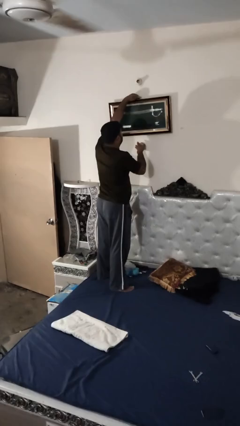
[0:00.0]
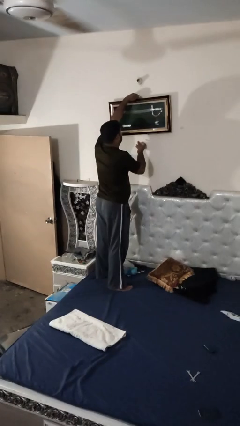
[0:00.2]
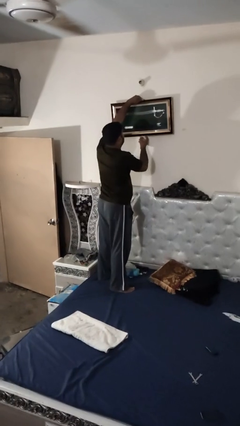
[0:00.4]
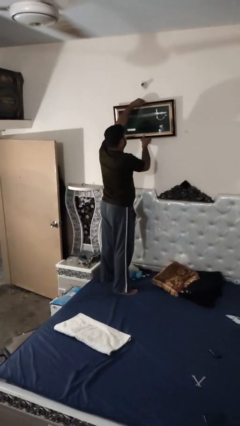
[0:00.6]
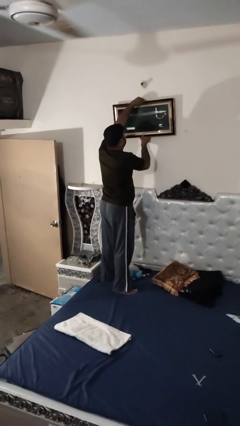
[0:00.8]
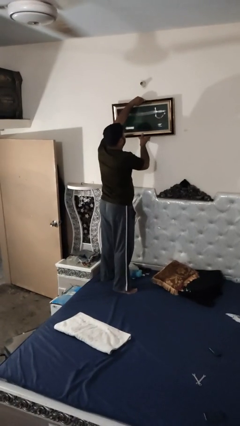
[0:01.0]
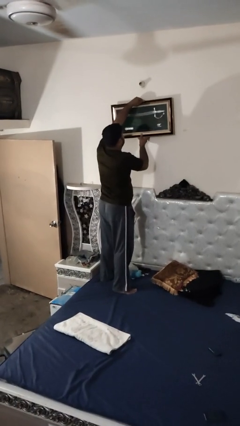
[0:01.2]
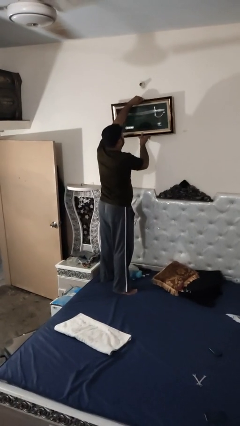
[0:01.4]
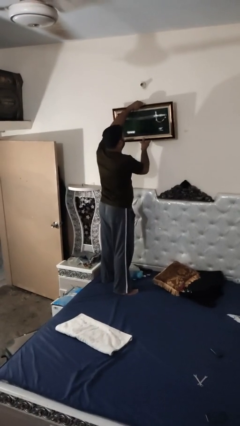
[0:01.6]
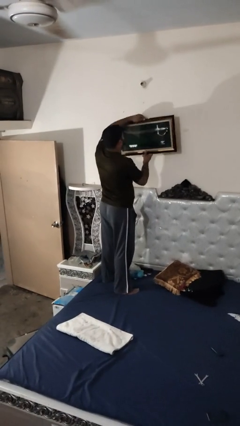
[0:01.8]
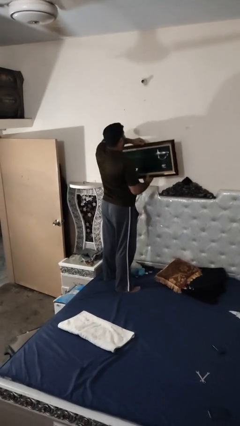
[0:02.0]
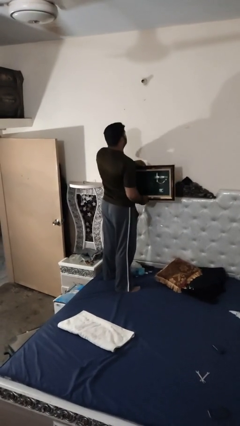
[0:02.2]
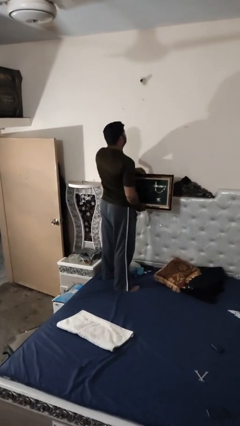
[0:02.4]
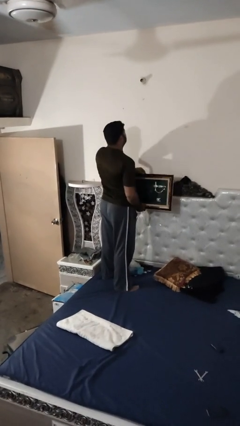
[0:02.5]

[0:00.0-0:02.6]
person takes down picture frame

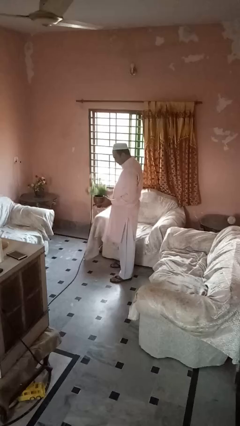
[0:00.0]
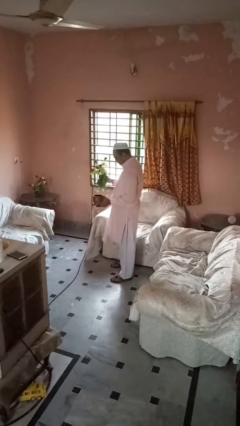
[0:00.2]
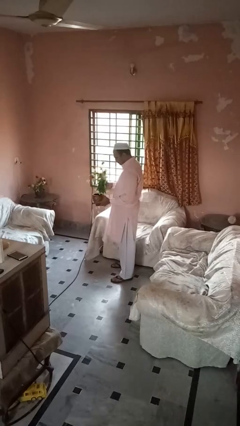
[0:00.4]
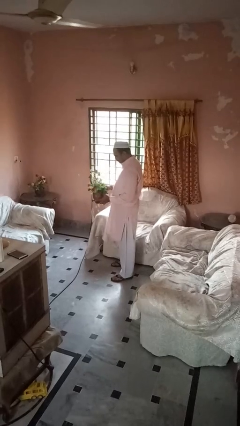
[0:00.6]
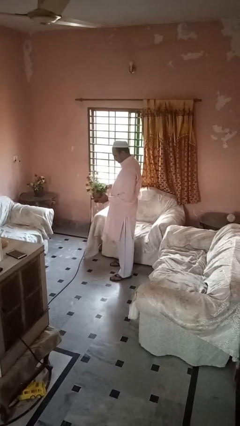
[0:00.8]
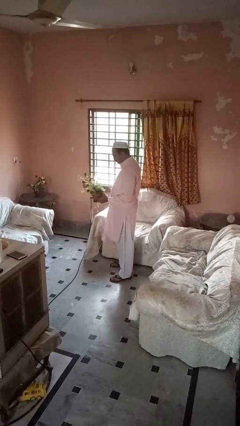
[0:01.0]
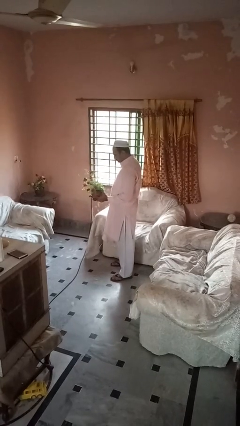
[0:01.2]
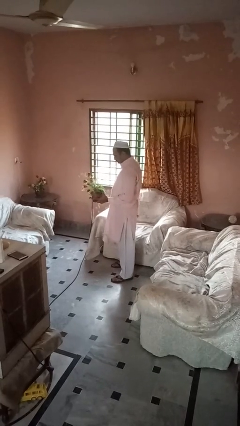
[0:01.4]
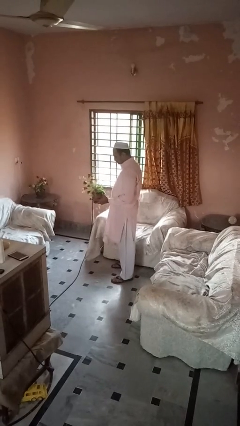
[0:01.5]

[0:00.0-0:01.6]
person arranges flowers in vase

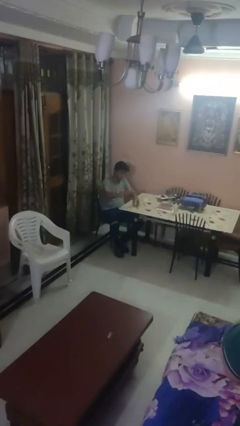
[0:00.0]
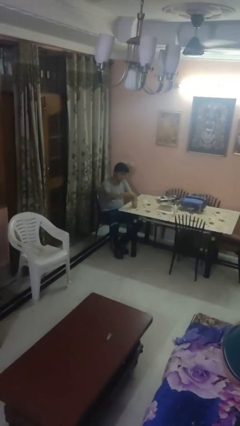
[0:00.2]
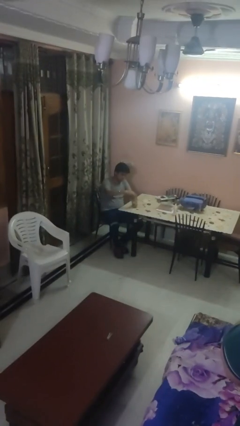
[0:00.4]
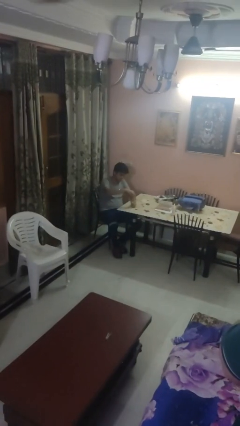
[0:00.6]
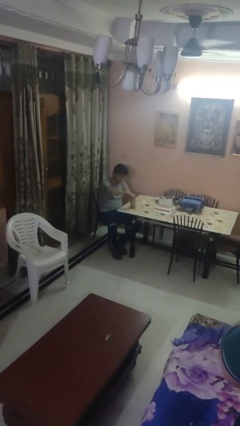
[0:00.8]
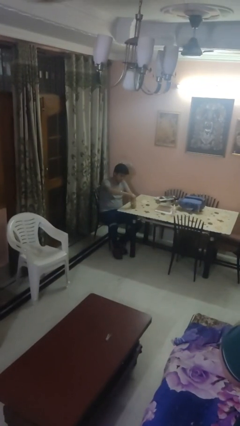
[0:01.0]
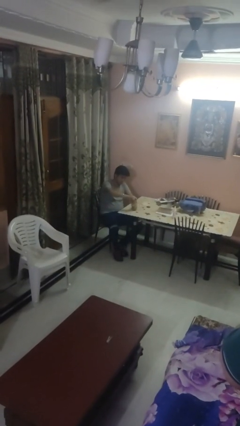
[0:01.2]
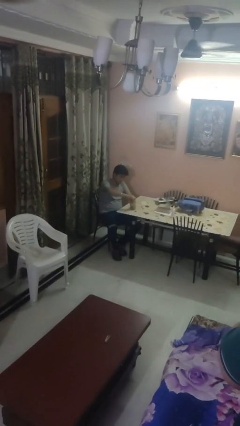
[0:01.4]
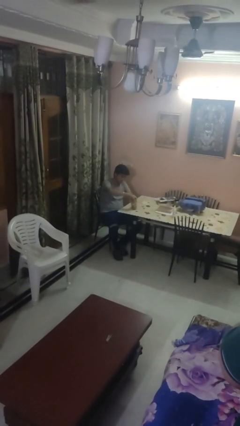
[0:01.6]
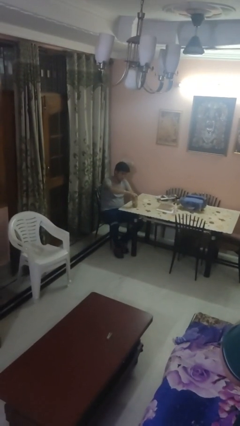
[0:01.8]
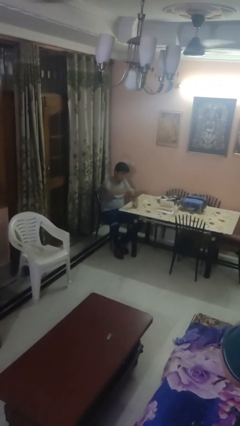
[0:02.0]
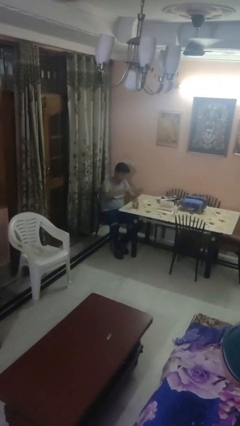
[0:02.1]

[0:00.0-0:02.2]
person screws lid to bottle

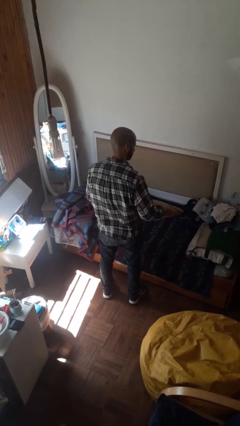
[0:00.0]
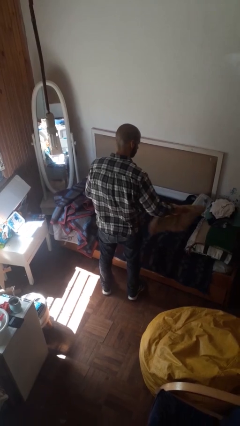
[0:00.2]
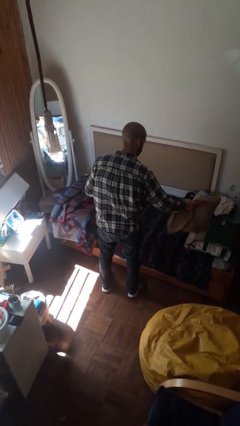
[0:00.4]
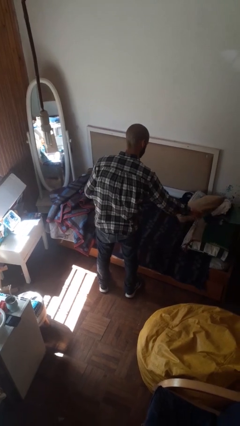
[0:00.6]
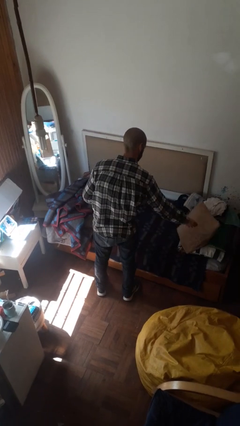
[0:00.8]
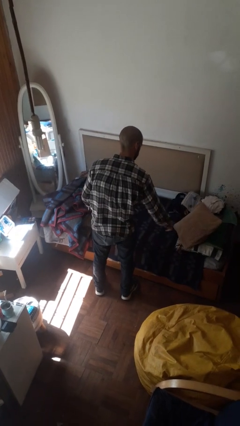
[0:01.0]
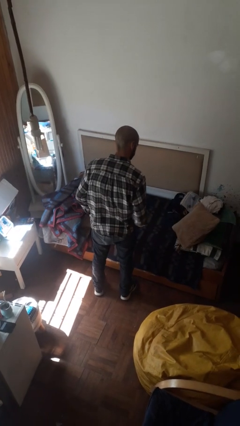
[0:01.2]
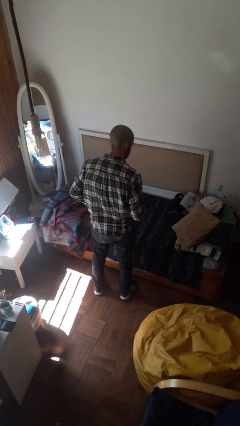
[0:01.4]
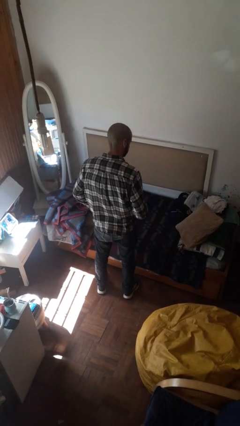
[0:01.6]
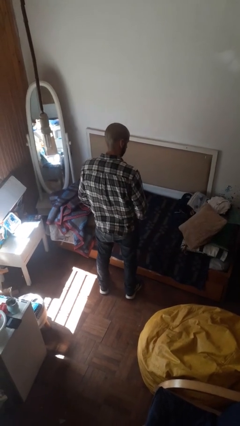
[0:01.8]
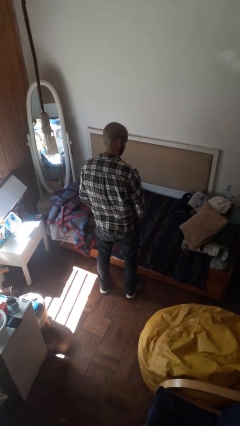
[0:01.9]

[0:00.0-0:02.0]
person puts down object on bed

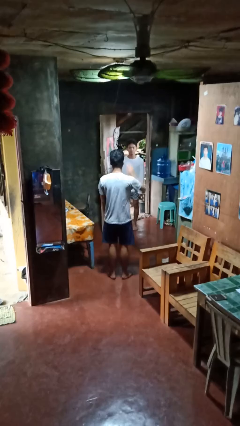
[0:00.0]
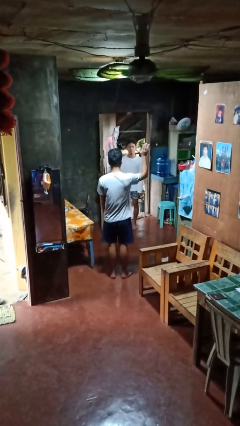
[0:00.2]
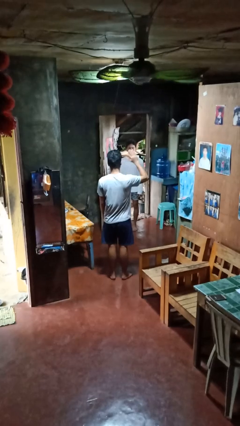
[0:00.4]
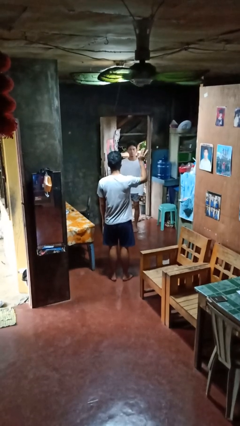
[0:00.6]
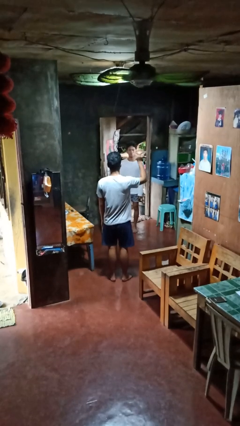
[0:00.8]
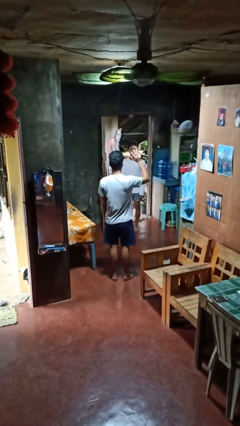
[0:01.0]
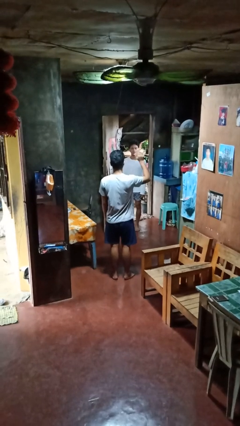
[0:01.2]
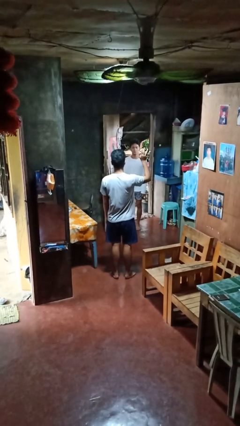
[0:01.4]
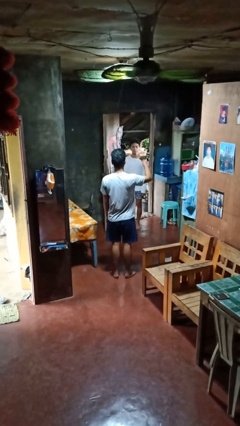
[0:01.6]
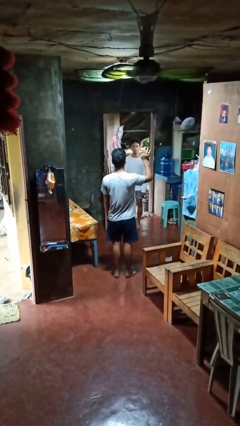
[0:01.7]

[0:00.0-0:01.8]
person waves at person

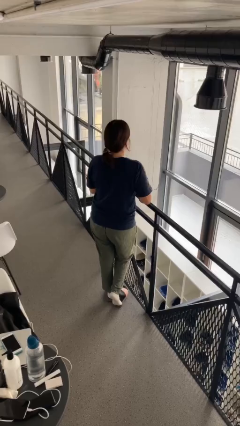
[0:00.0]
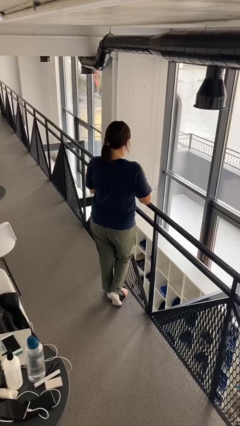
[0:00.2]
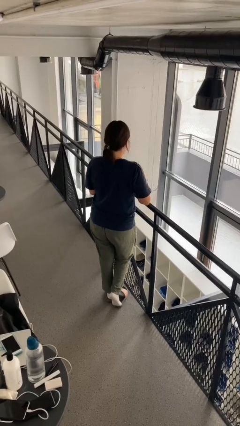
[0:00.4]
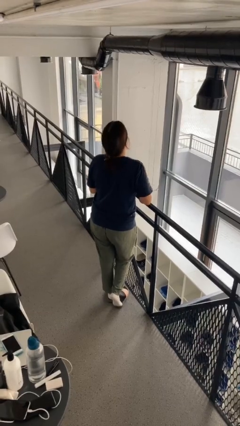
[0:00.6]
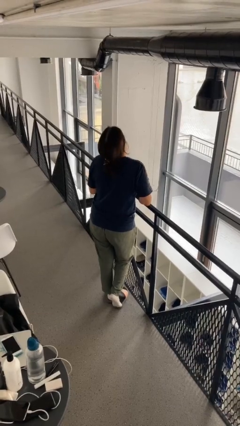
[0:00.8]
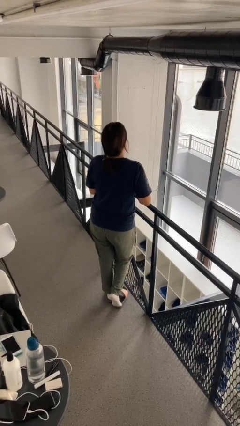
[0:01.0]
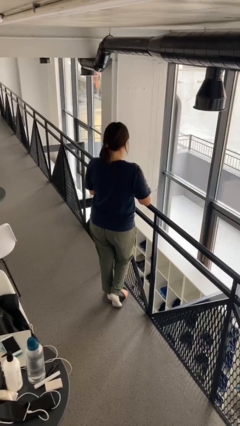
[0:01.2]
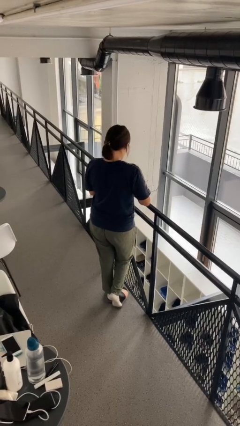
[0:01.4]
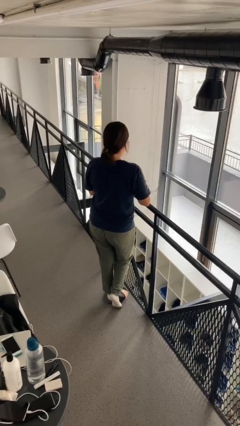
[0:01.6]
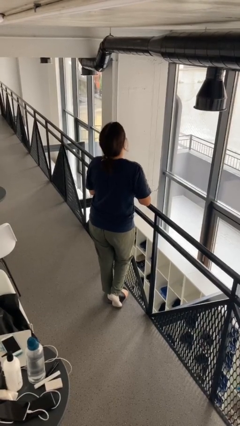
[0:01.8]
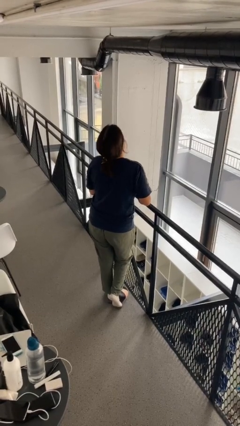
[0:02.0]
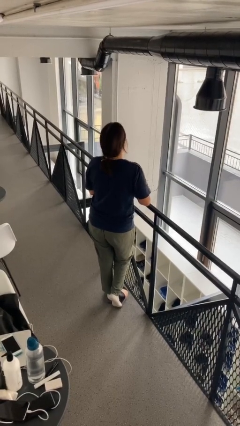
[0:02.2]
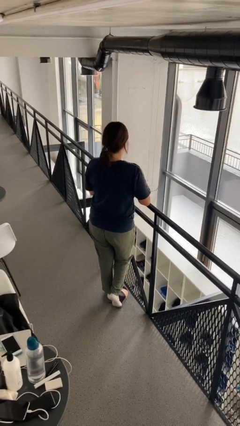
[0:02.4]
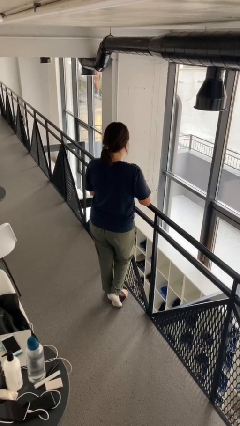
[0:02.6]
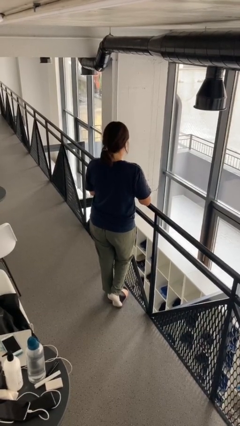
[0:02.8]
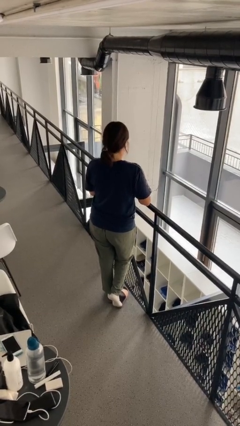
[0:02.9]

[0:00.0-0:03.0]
person nods head

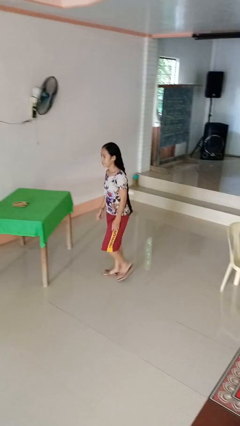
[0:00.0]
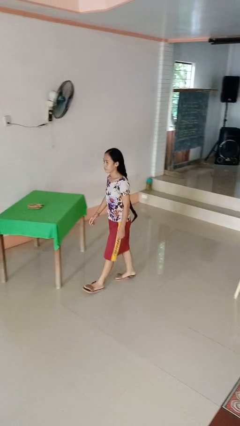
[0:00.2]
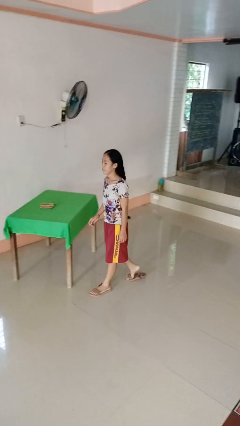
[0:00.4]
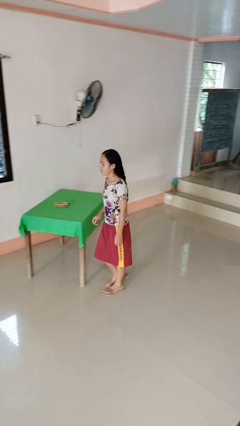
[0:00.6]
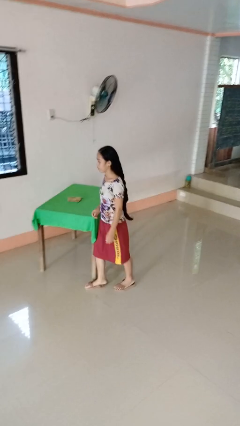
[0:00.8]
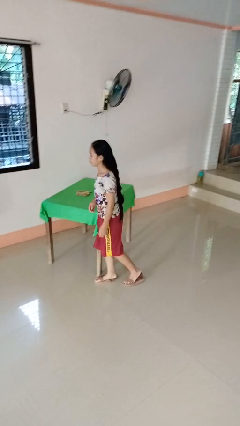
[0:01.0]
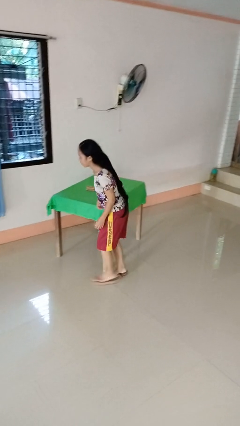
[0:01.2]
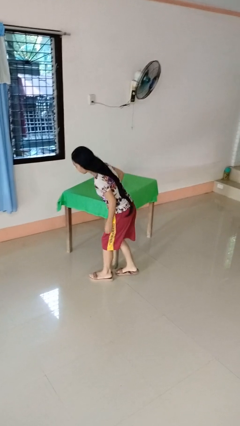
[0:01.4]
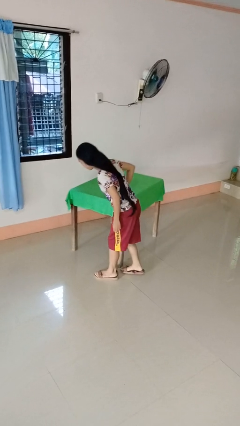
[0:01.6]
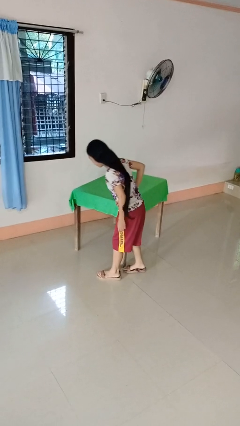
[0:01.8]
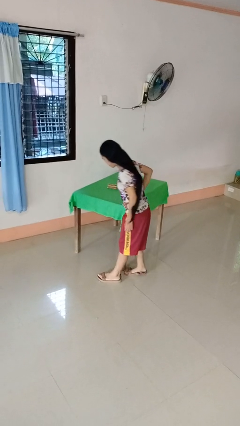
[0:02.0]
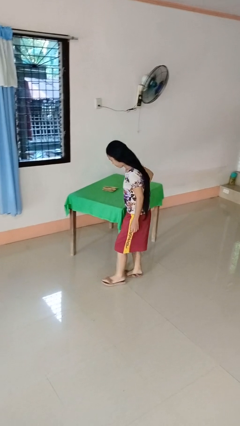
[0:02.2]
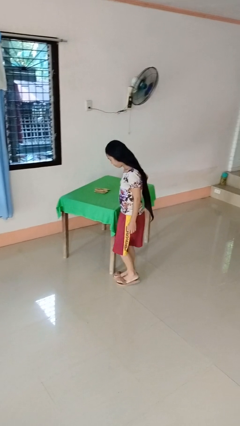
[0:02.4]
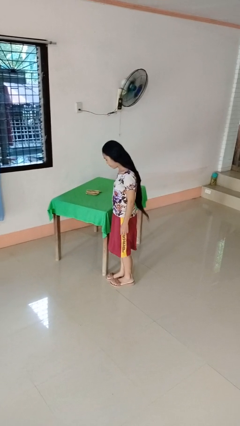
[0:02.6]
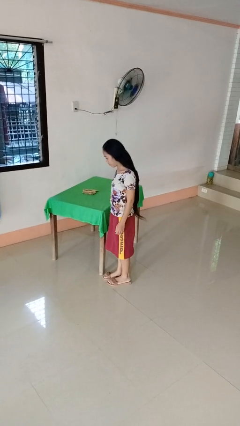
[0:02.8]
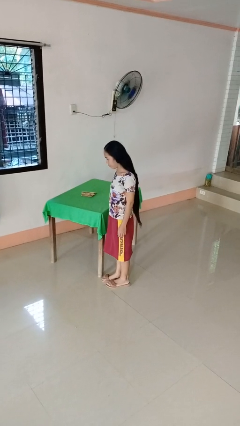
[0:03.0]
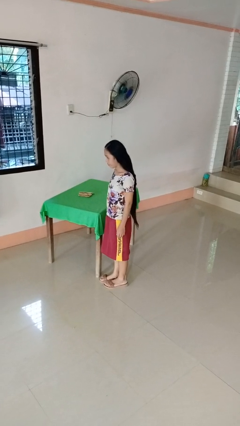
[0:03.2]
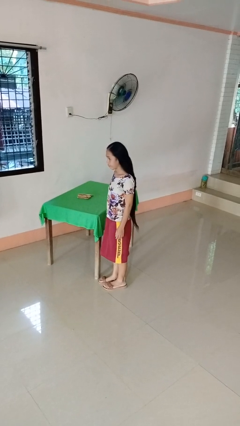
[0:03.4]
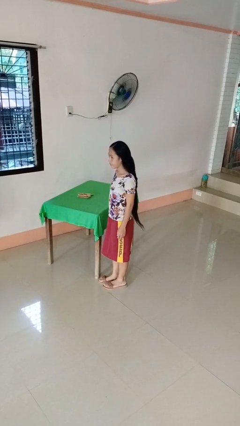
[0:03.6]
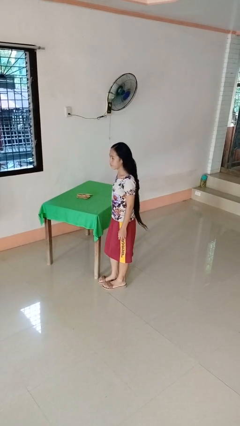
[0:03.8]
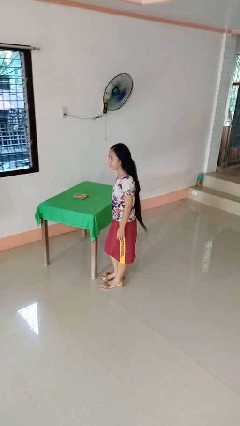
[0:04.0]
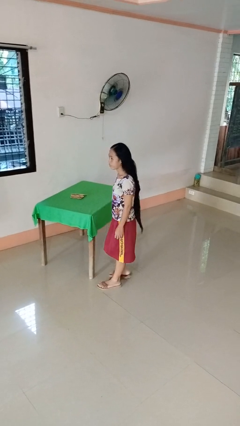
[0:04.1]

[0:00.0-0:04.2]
person bumps into table
